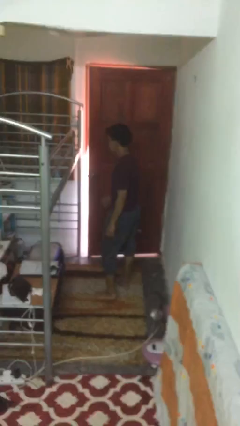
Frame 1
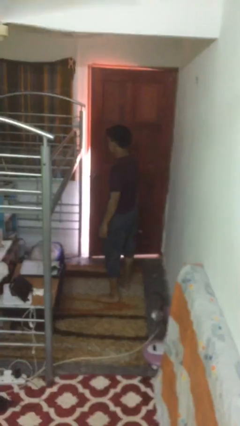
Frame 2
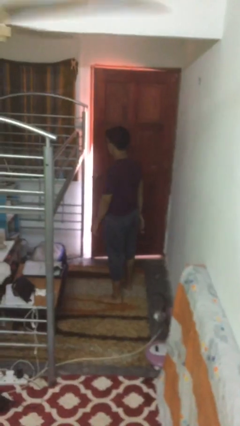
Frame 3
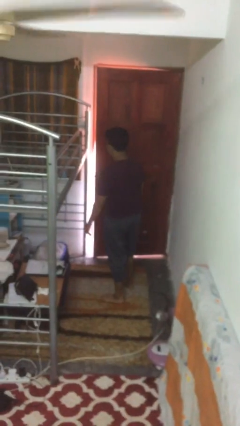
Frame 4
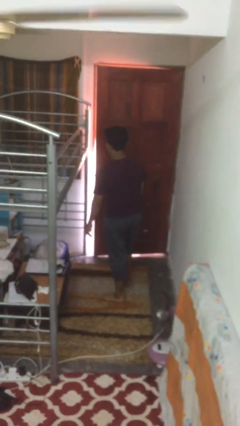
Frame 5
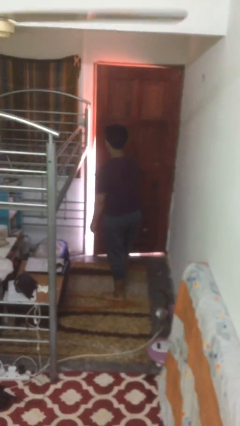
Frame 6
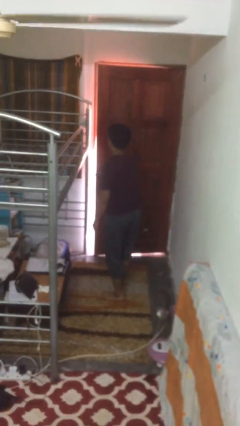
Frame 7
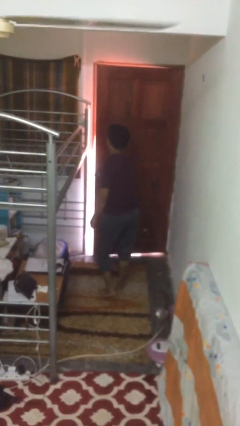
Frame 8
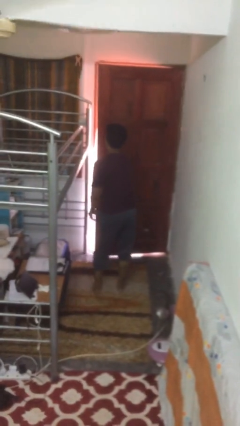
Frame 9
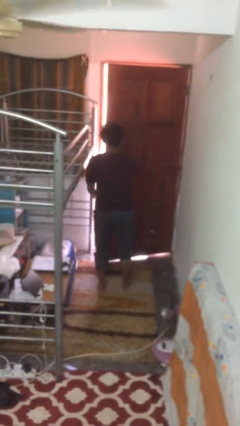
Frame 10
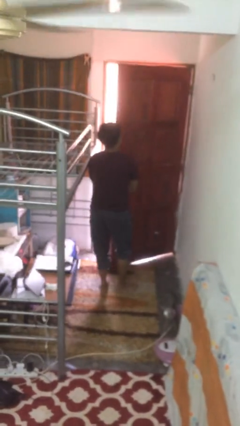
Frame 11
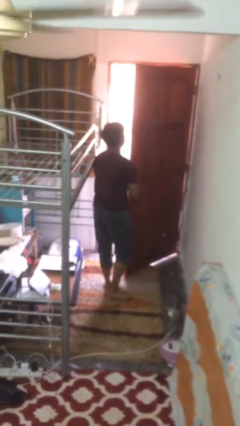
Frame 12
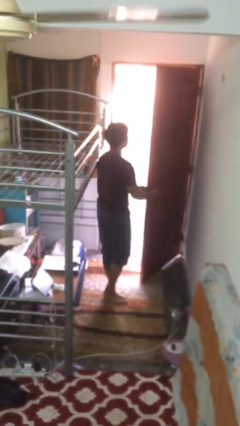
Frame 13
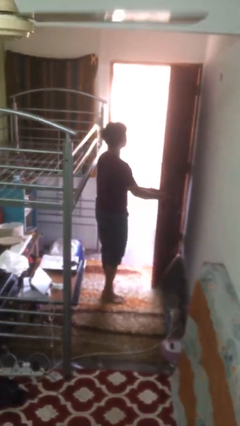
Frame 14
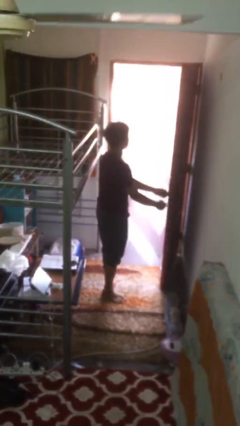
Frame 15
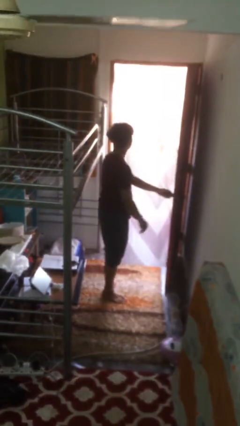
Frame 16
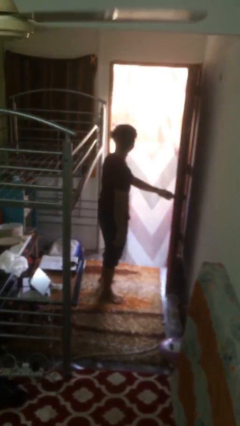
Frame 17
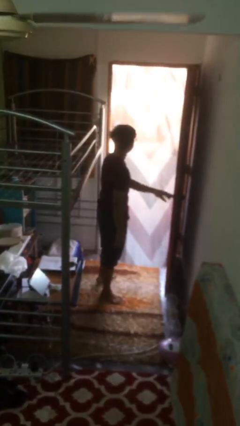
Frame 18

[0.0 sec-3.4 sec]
person opens facility door

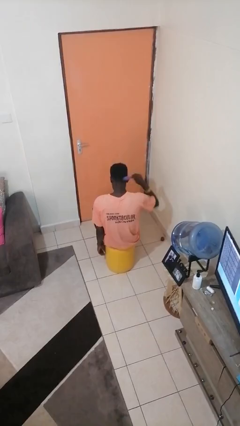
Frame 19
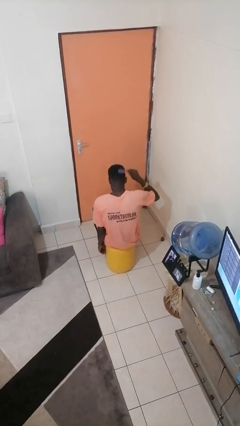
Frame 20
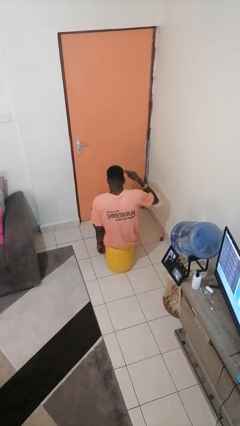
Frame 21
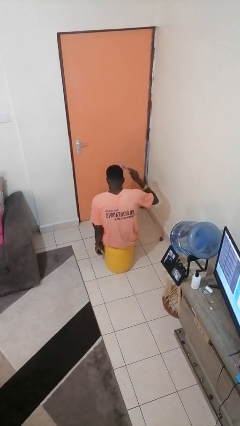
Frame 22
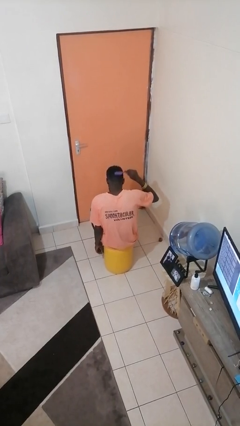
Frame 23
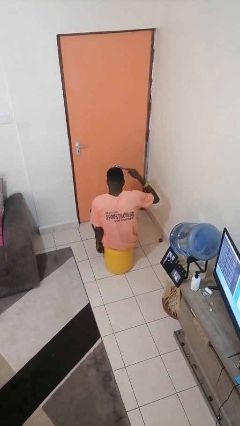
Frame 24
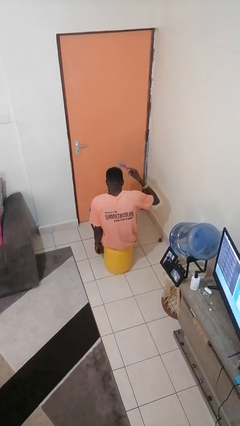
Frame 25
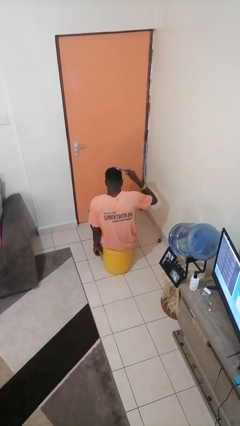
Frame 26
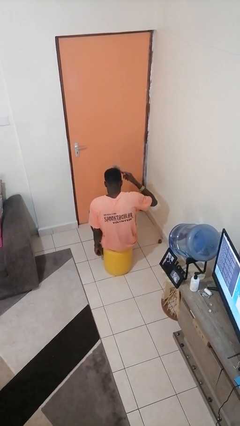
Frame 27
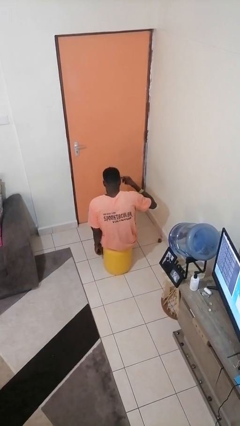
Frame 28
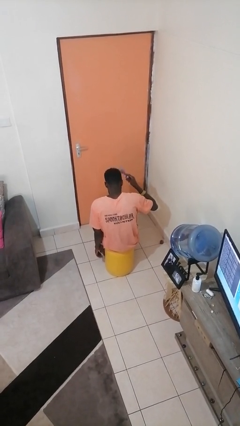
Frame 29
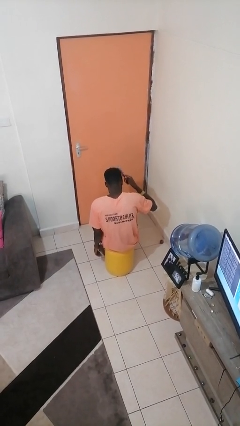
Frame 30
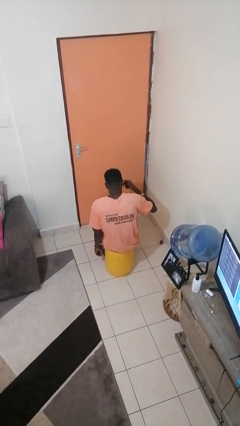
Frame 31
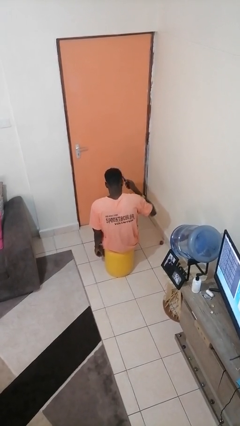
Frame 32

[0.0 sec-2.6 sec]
person brushes hair

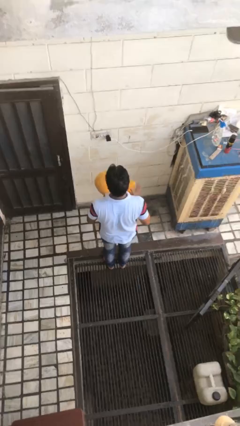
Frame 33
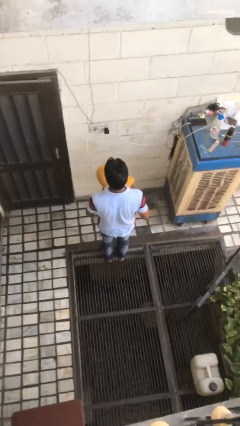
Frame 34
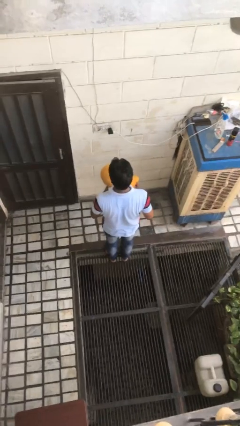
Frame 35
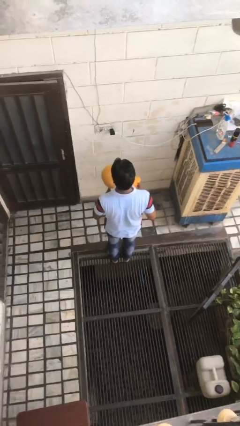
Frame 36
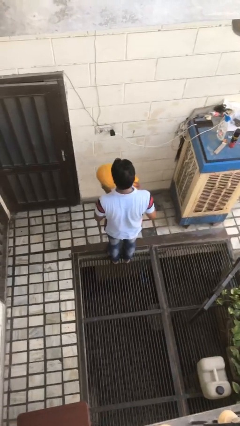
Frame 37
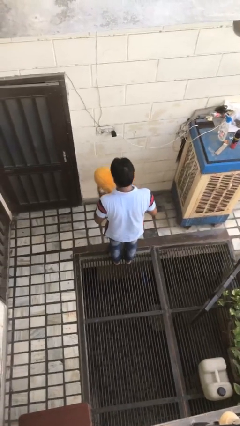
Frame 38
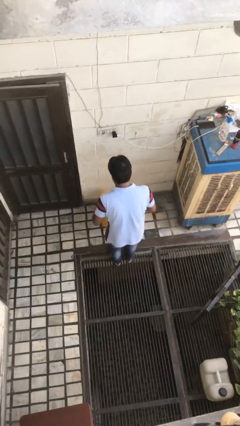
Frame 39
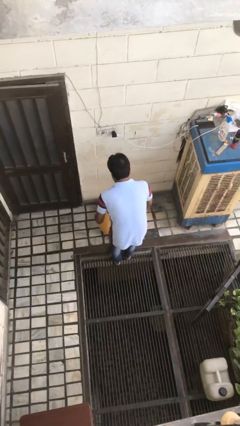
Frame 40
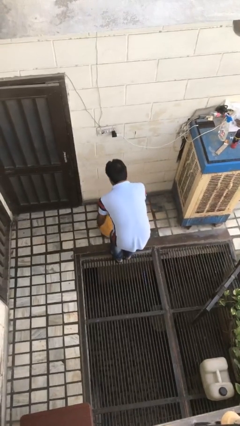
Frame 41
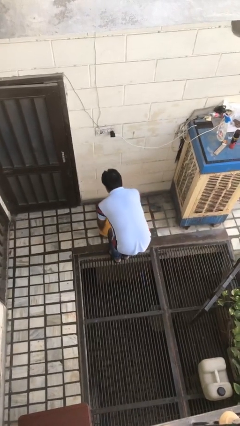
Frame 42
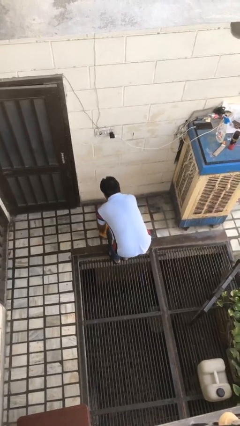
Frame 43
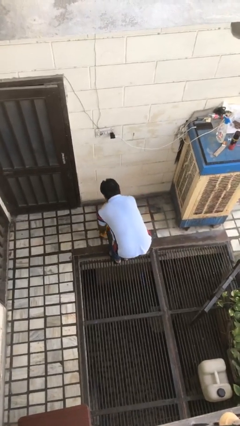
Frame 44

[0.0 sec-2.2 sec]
person throws object to ground

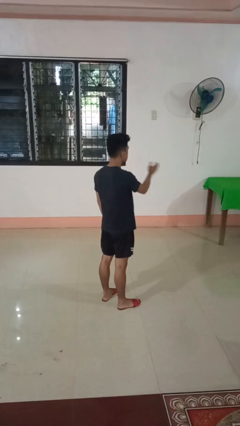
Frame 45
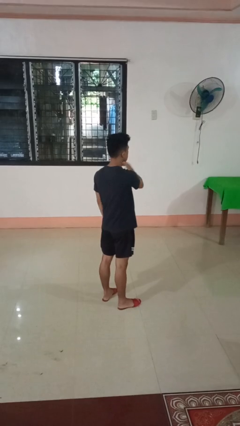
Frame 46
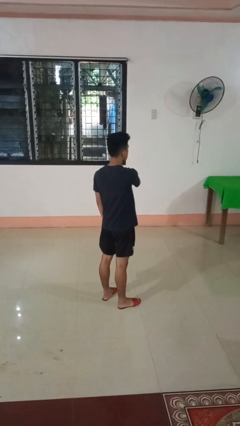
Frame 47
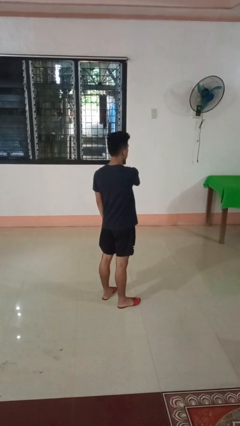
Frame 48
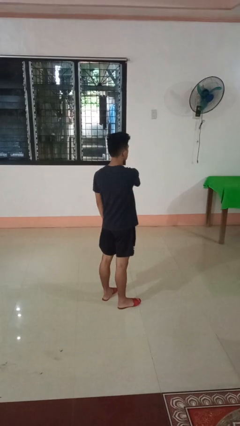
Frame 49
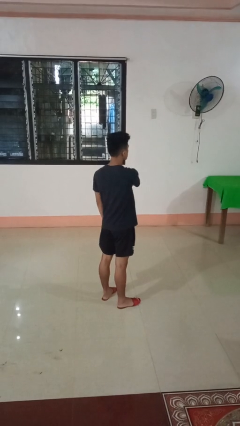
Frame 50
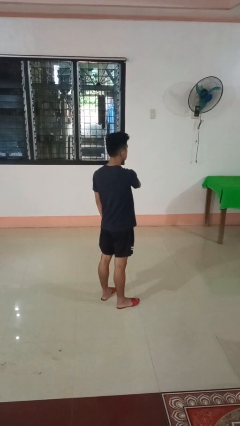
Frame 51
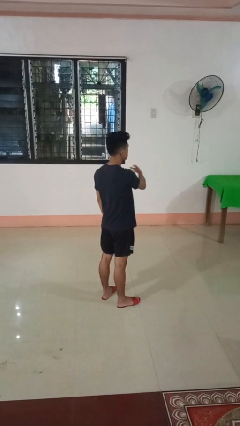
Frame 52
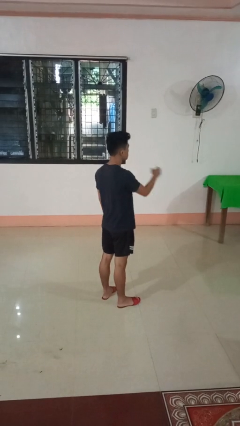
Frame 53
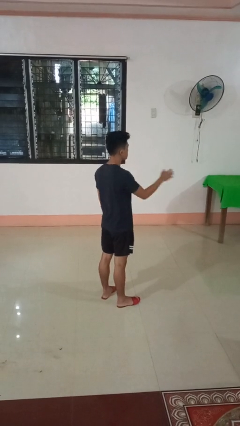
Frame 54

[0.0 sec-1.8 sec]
person gestures swipe left

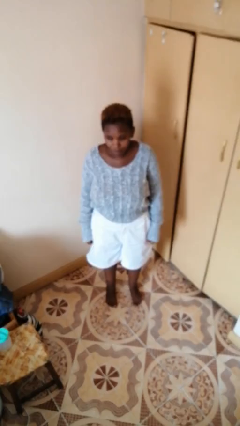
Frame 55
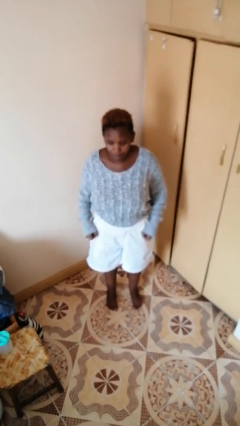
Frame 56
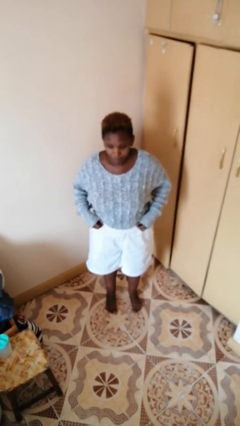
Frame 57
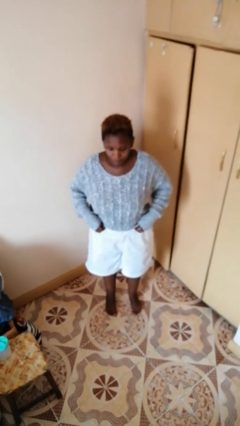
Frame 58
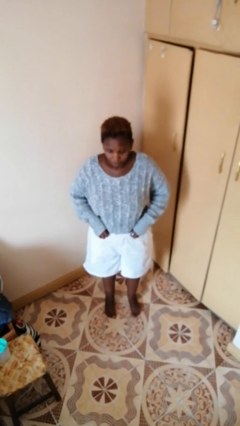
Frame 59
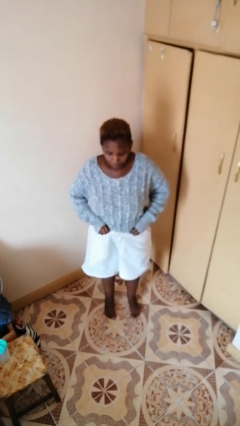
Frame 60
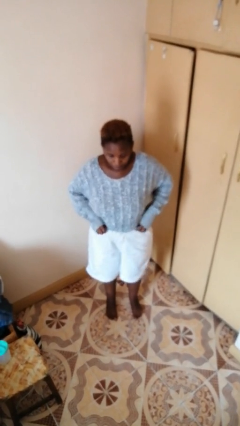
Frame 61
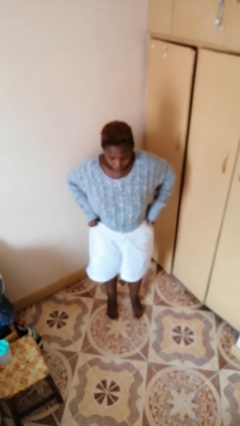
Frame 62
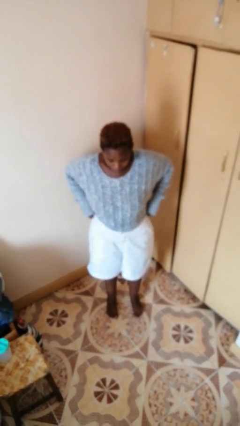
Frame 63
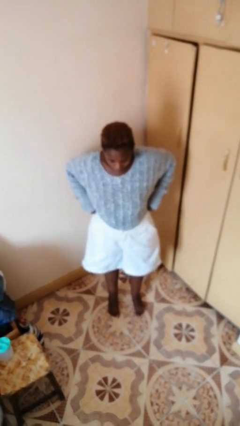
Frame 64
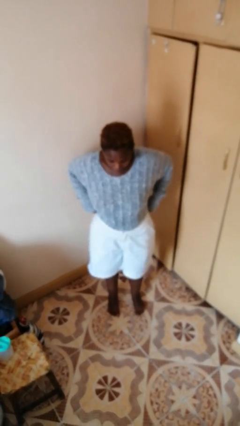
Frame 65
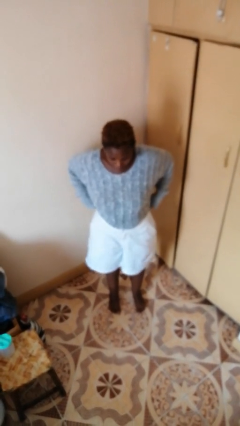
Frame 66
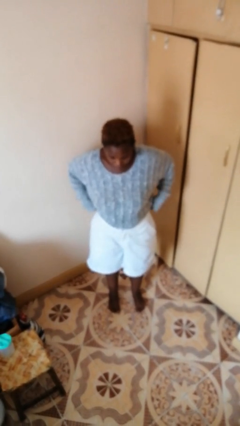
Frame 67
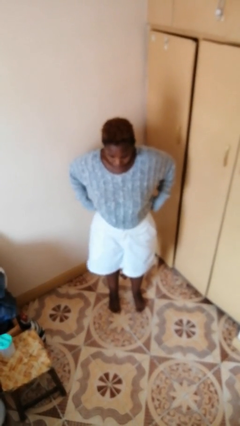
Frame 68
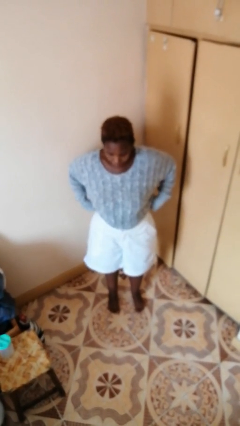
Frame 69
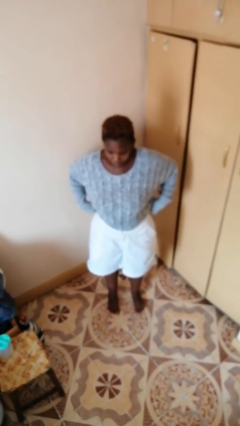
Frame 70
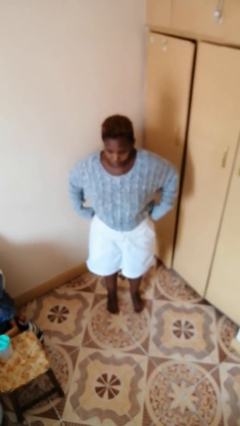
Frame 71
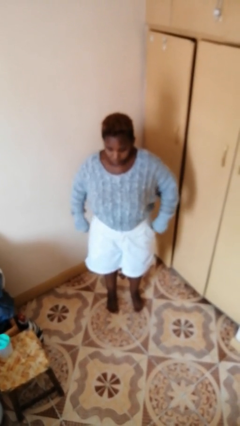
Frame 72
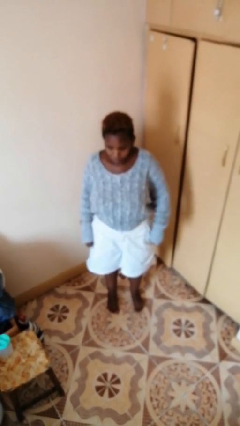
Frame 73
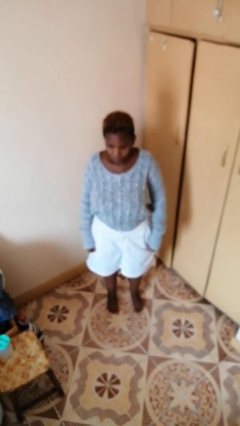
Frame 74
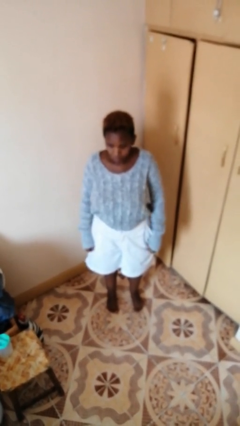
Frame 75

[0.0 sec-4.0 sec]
person hikes up pants

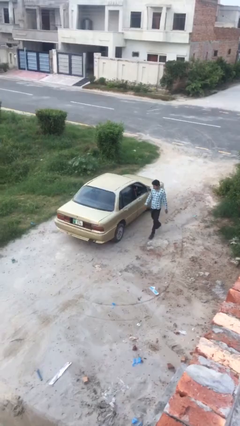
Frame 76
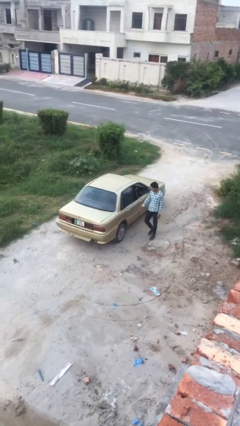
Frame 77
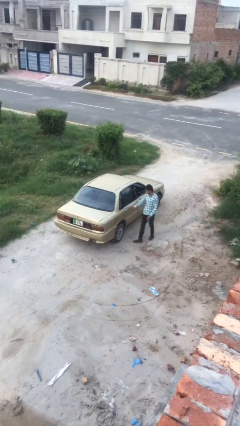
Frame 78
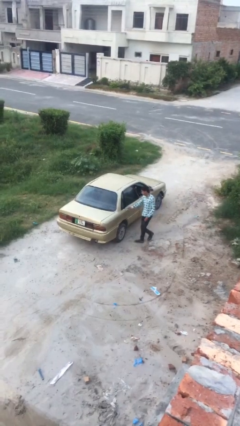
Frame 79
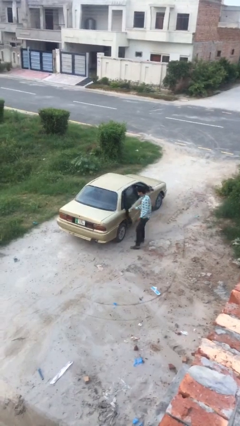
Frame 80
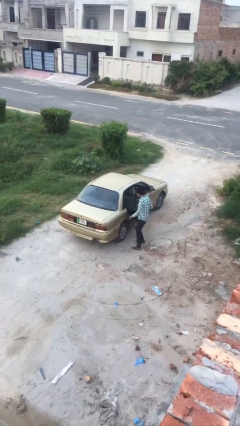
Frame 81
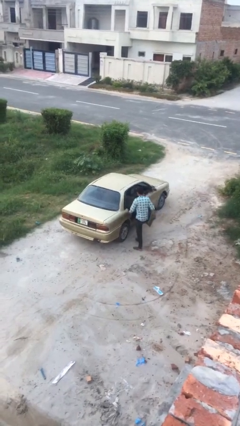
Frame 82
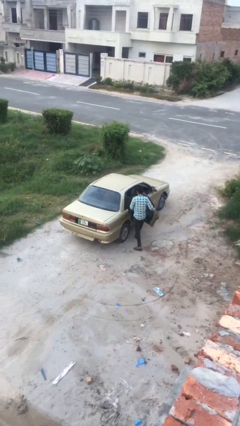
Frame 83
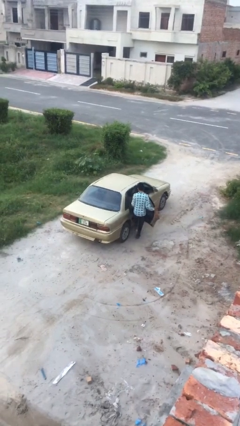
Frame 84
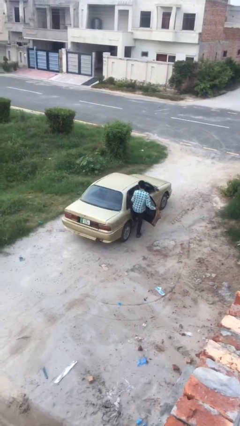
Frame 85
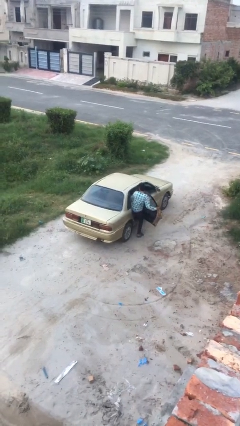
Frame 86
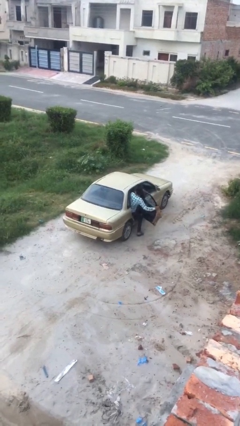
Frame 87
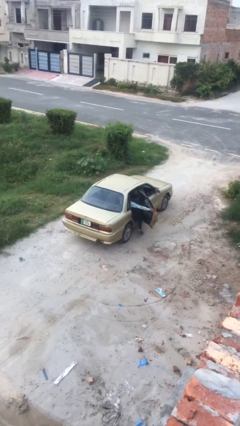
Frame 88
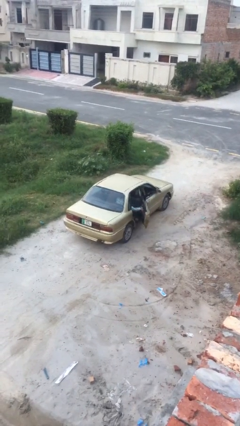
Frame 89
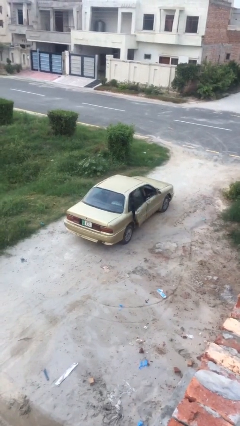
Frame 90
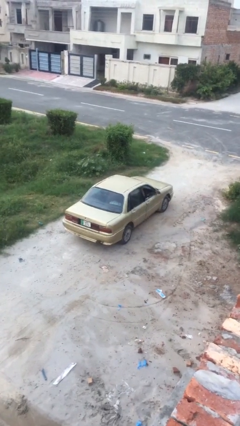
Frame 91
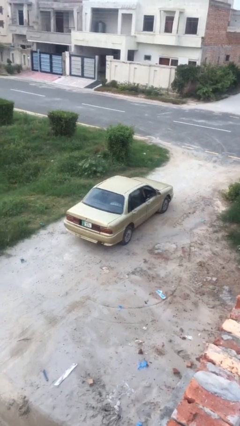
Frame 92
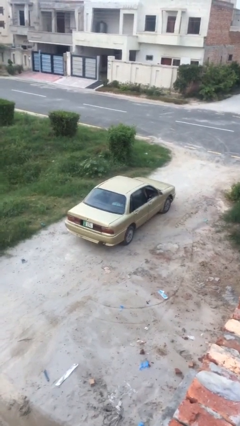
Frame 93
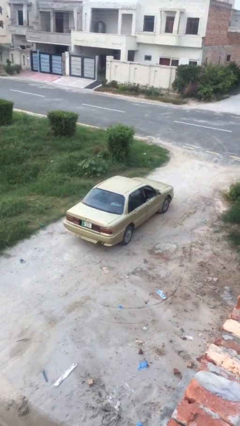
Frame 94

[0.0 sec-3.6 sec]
car picks up person
